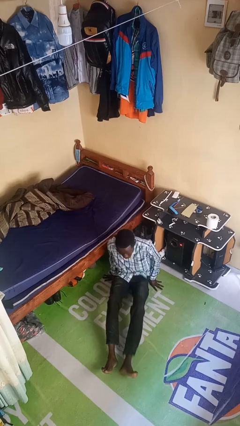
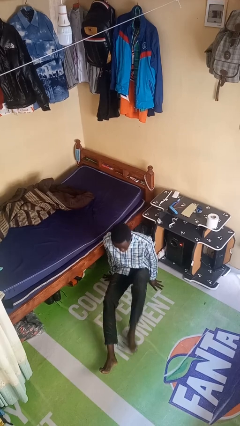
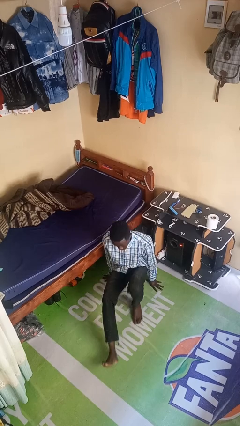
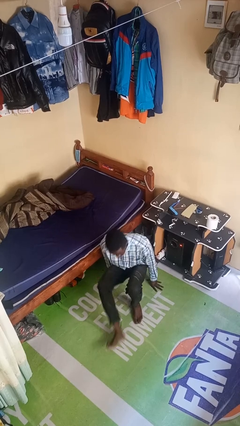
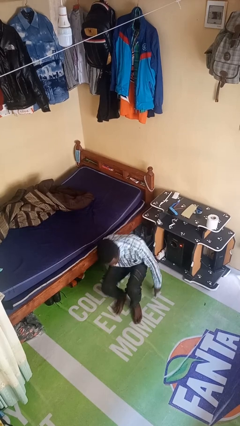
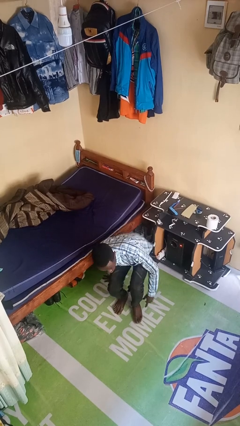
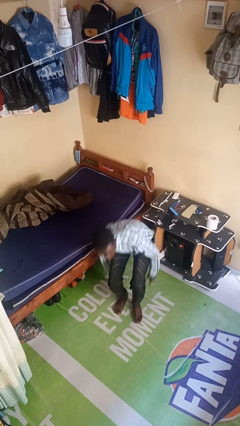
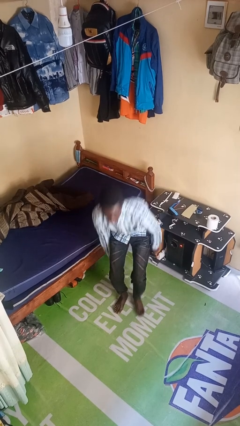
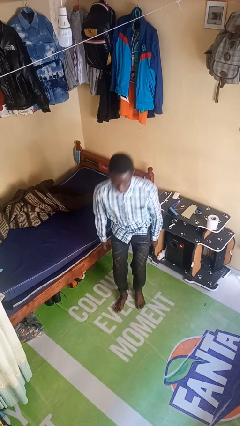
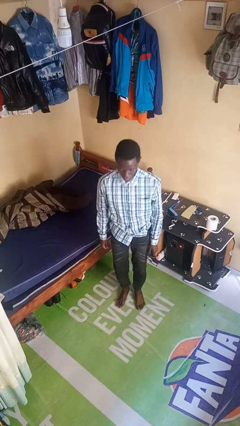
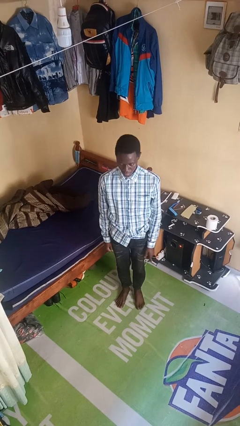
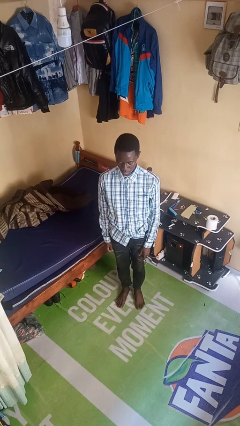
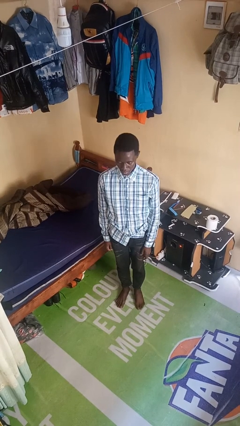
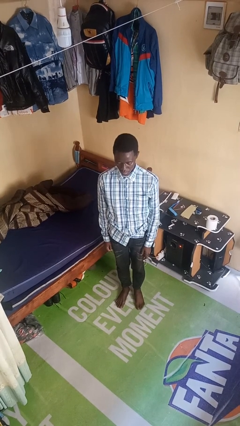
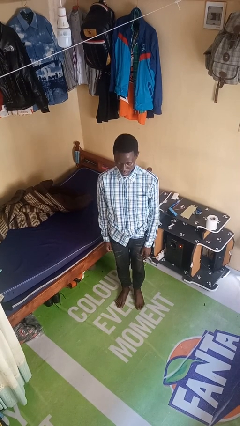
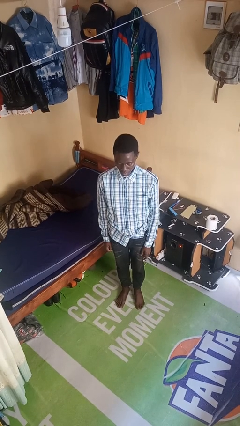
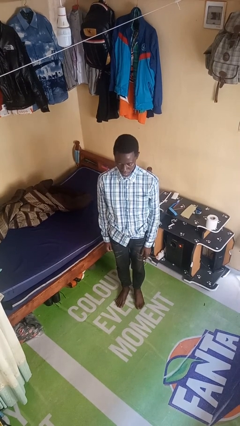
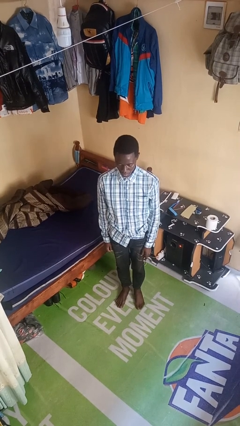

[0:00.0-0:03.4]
person stands up from floor

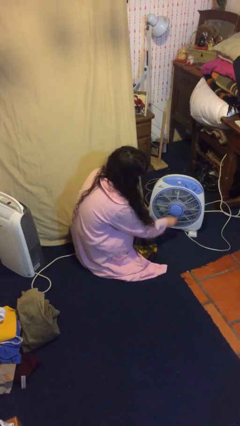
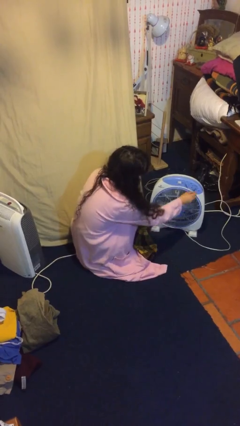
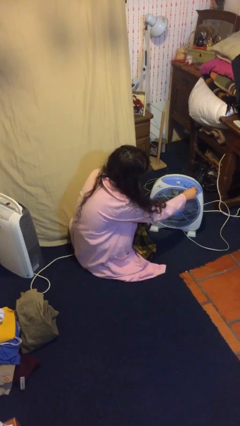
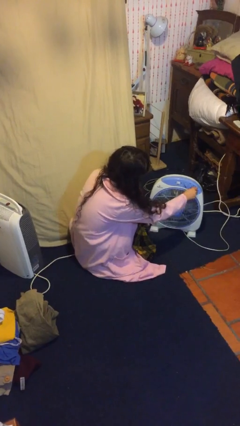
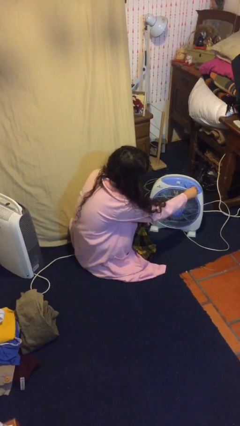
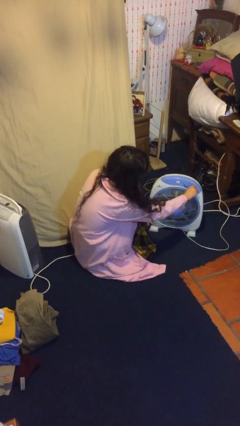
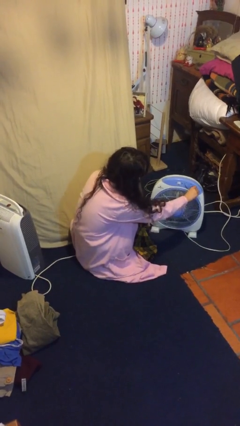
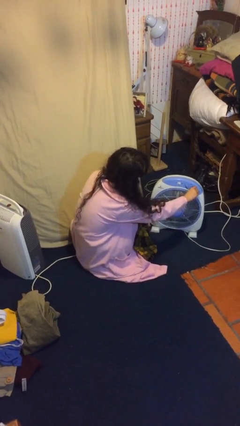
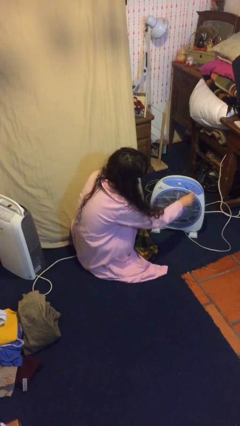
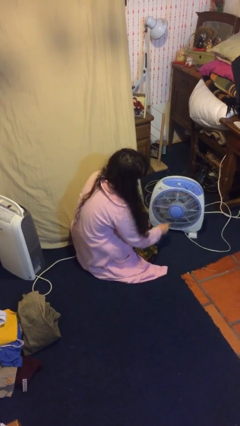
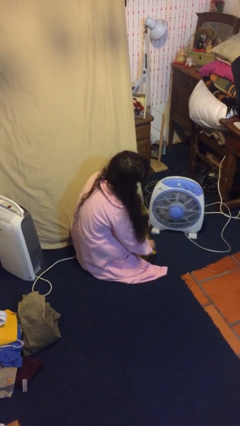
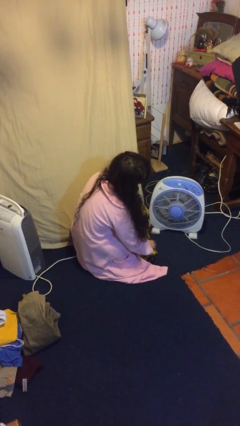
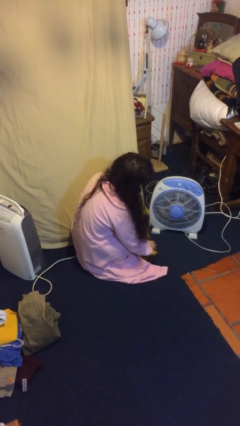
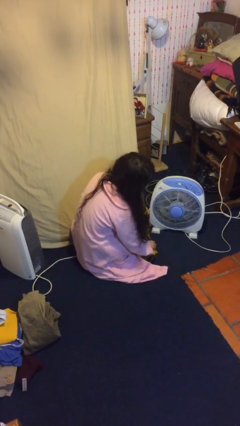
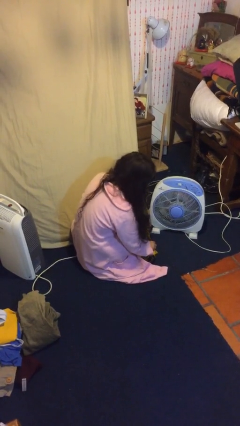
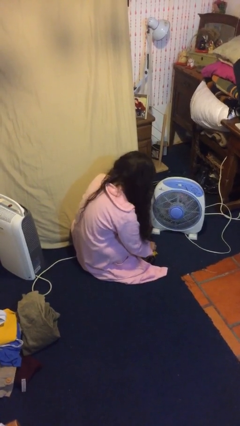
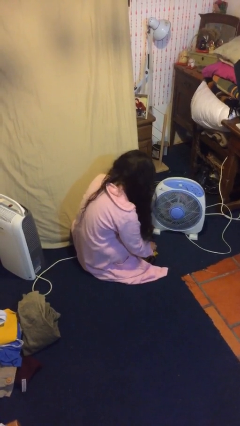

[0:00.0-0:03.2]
person turns on fan

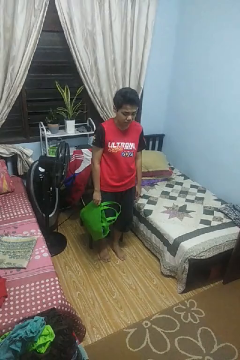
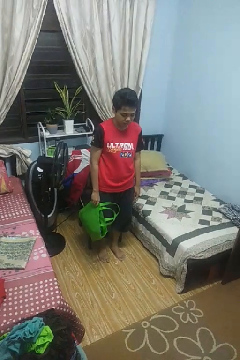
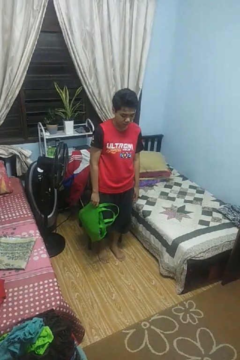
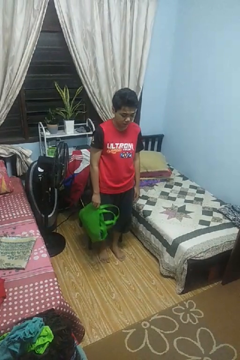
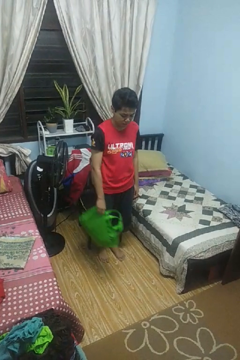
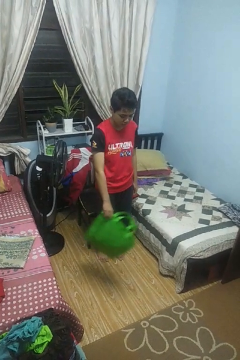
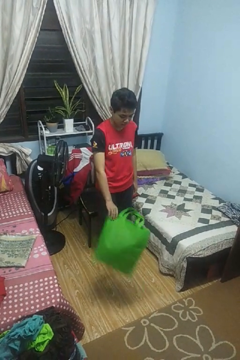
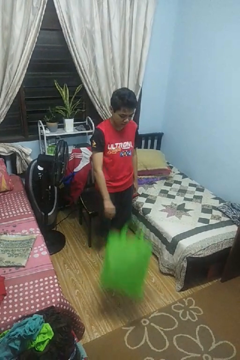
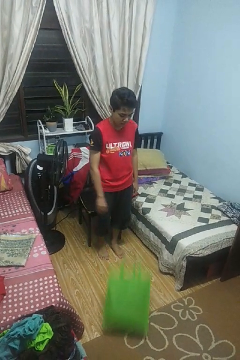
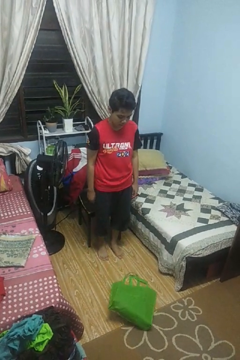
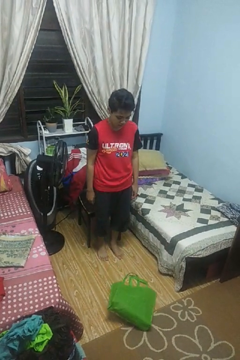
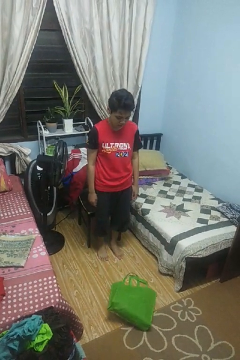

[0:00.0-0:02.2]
person throws object to ground

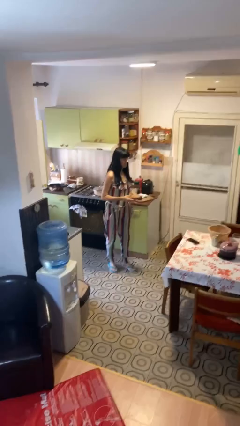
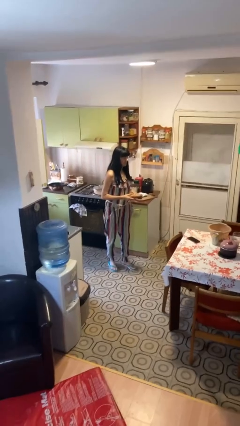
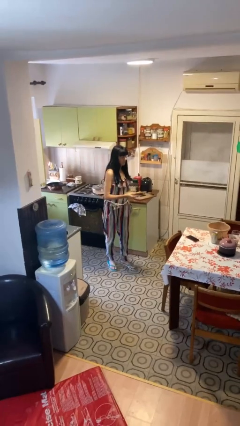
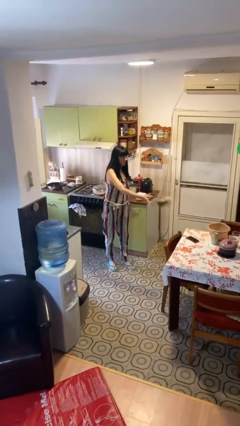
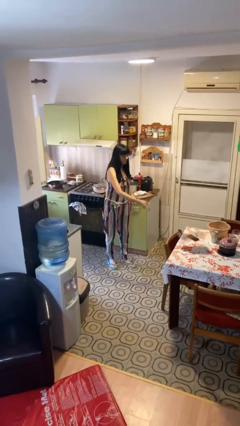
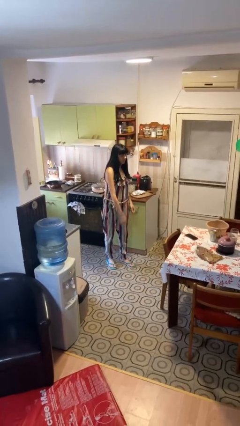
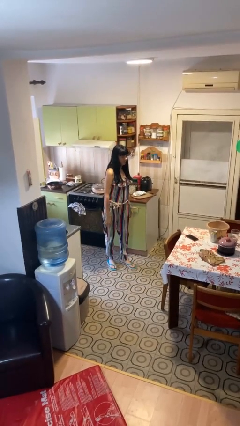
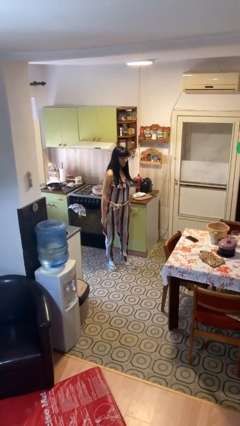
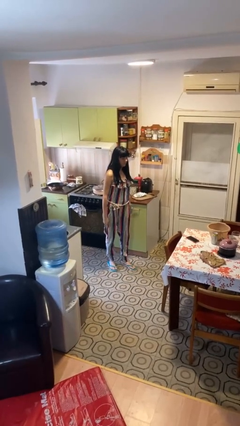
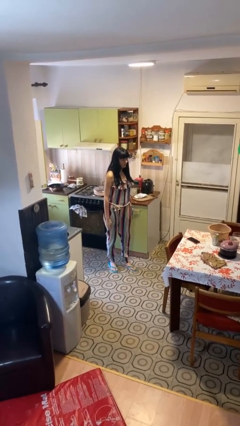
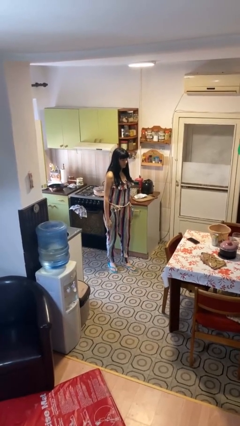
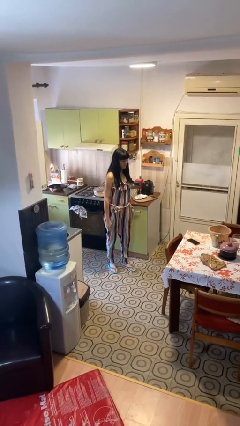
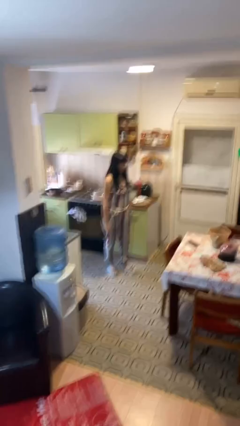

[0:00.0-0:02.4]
person throws object on table

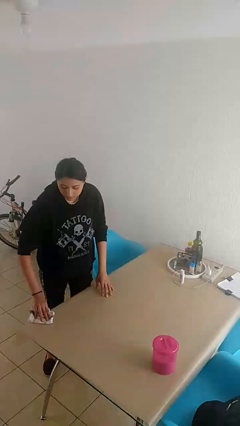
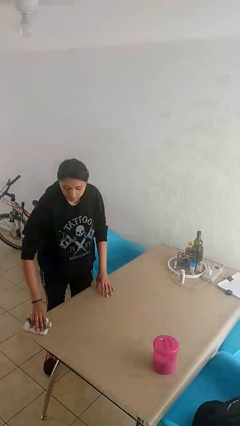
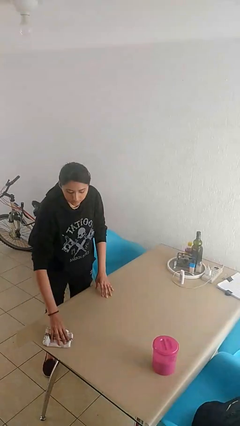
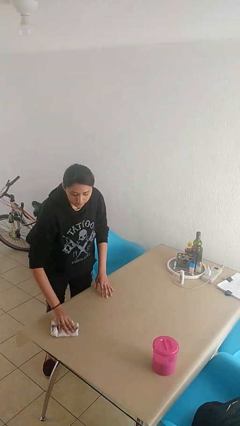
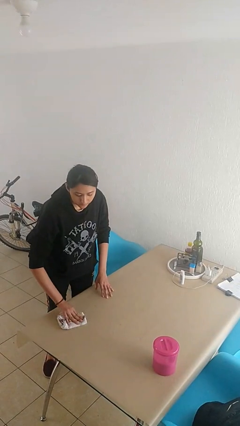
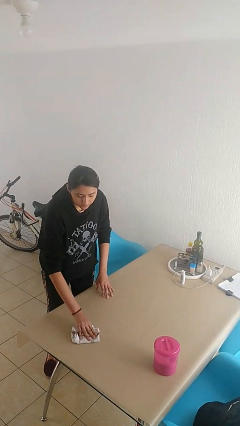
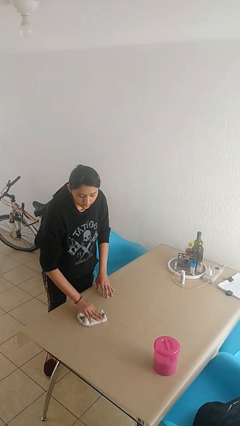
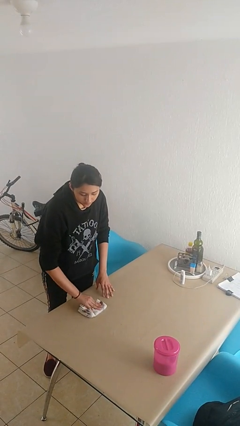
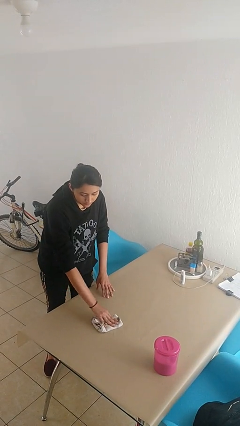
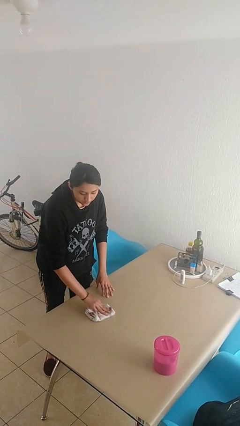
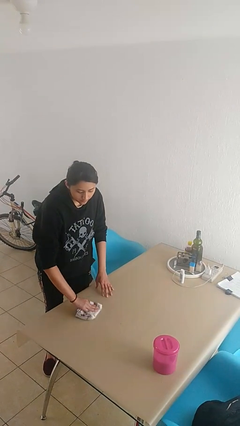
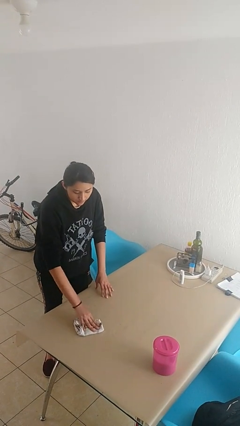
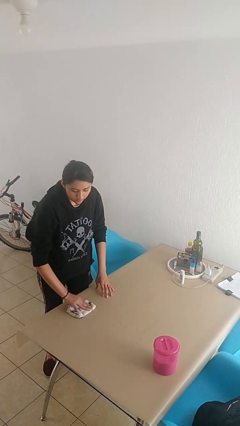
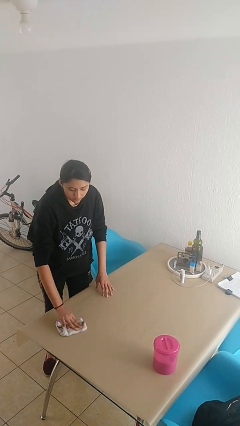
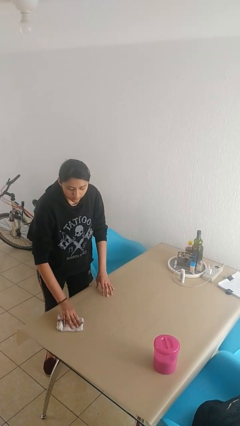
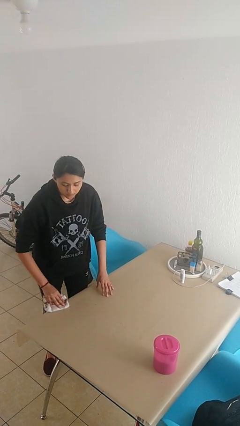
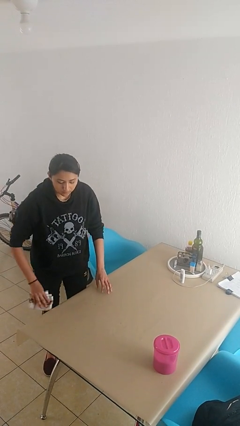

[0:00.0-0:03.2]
person cleans table with rag

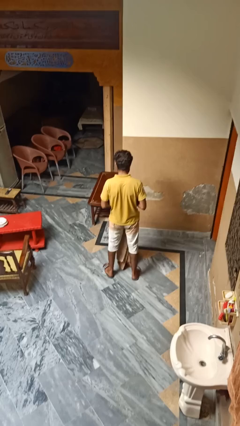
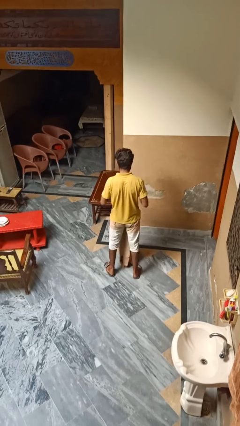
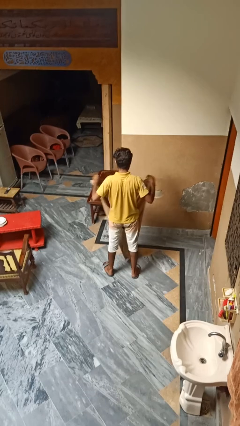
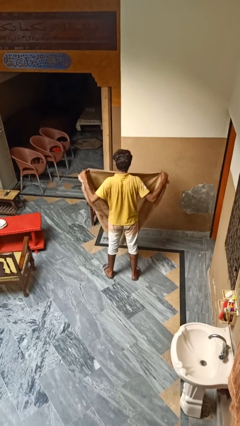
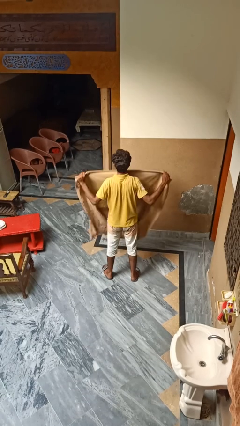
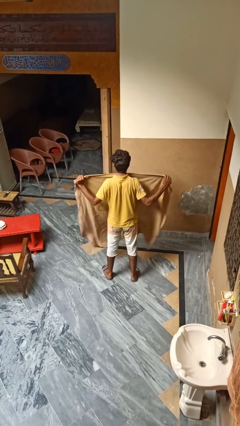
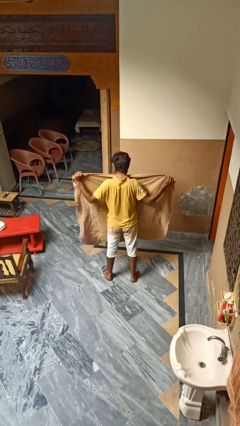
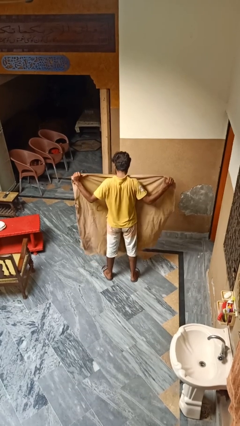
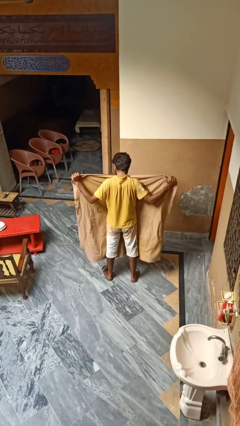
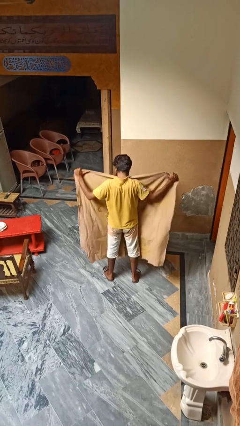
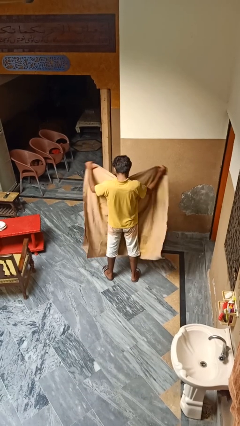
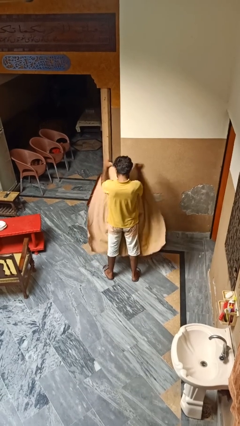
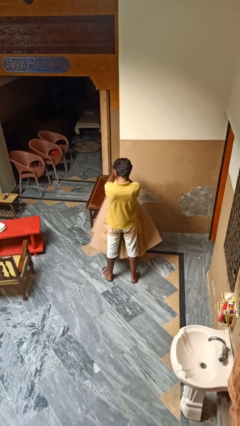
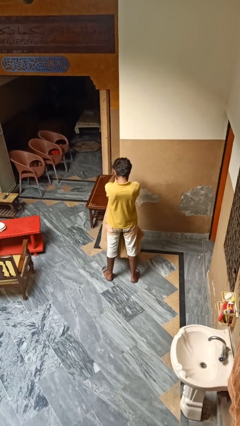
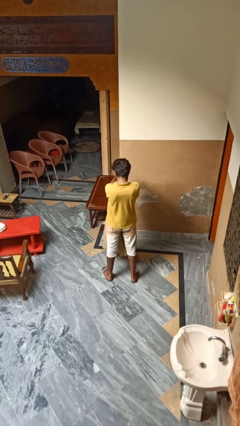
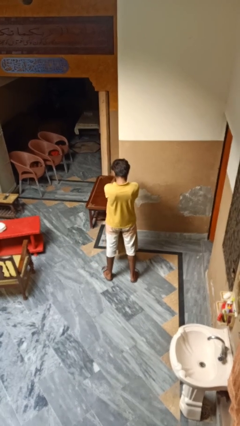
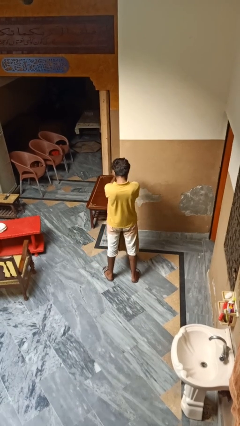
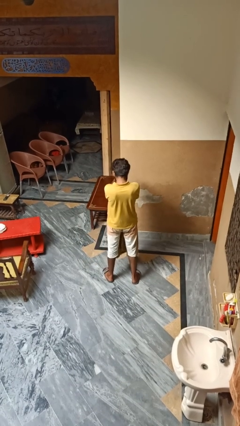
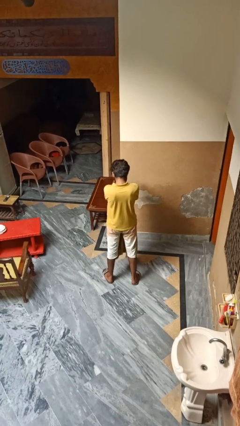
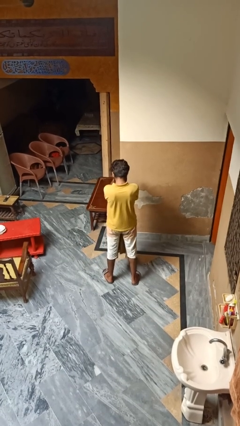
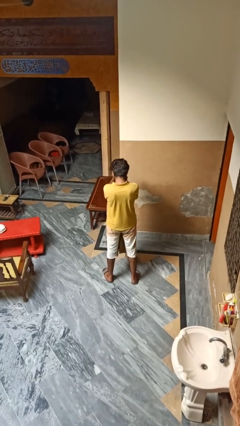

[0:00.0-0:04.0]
person folds blanket
